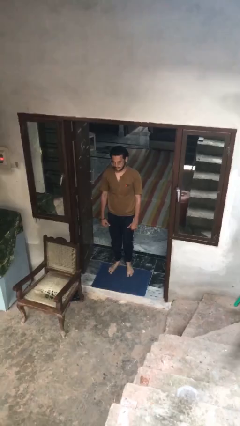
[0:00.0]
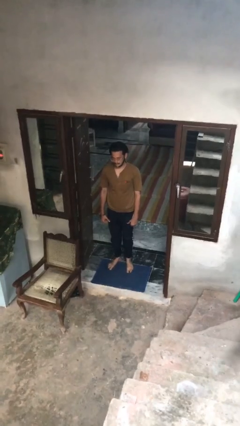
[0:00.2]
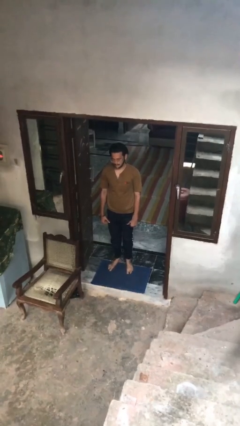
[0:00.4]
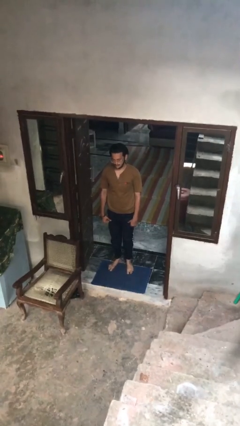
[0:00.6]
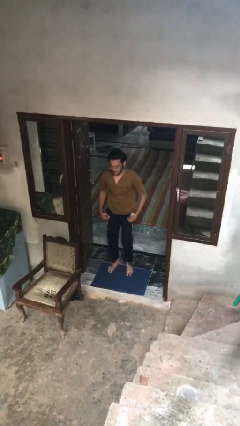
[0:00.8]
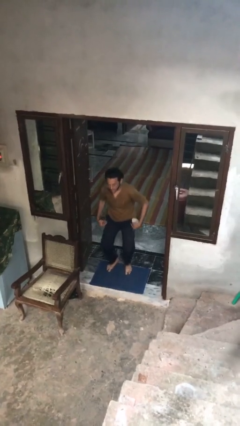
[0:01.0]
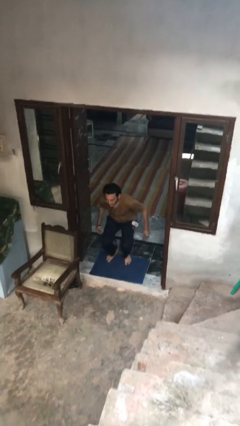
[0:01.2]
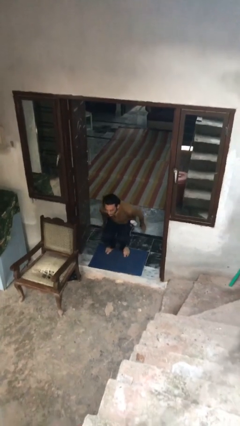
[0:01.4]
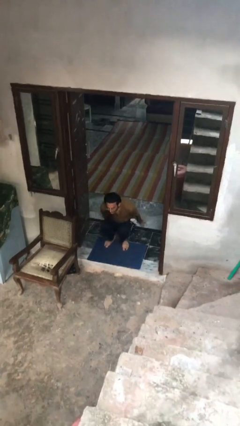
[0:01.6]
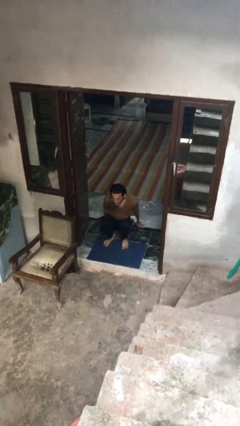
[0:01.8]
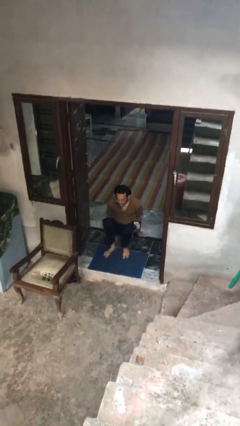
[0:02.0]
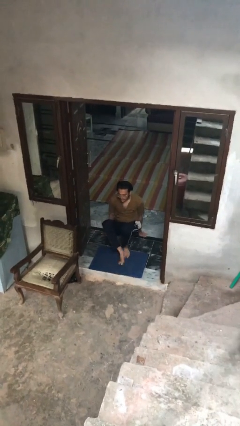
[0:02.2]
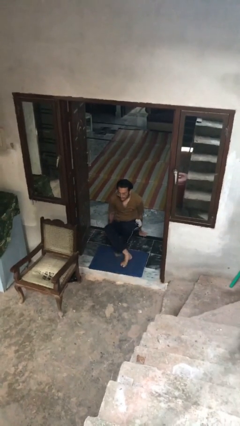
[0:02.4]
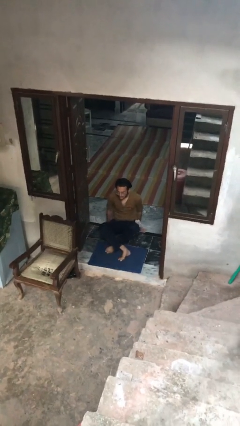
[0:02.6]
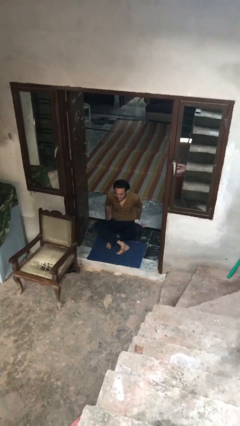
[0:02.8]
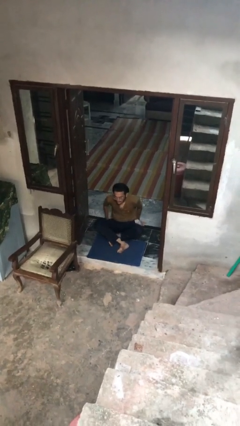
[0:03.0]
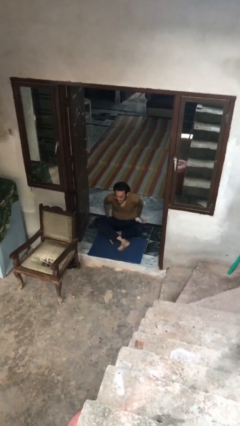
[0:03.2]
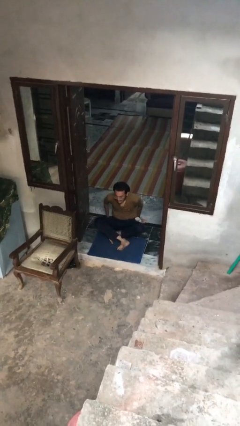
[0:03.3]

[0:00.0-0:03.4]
person sits crisscross

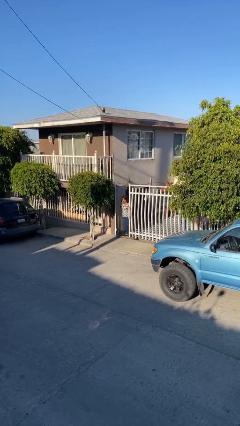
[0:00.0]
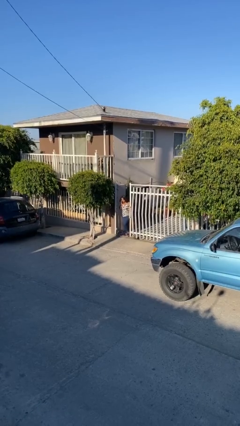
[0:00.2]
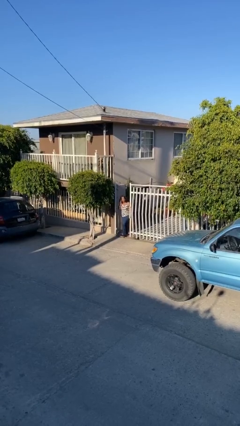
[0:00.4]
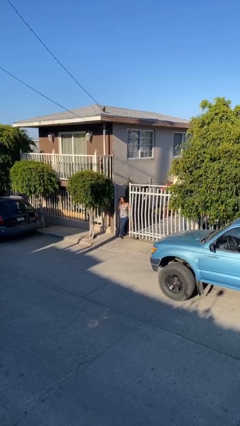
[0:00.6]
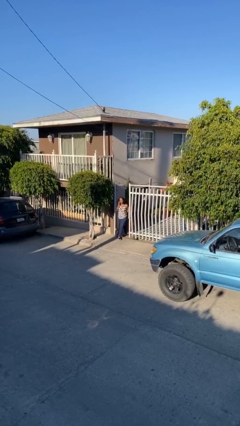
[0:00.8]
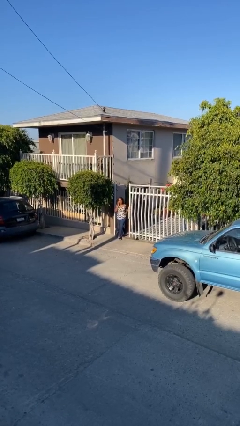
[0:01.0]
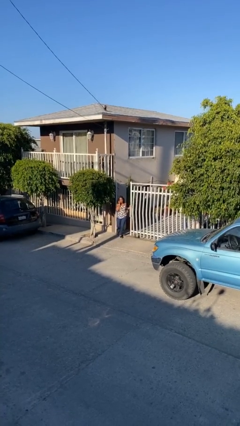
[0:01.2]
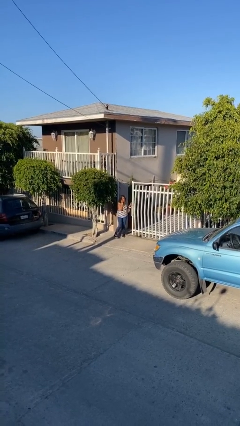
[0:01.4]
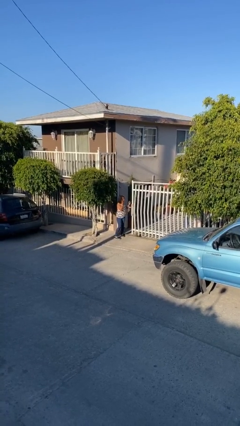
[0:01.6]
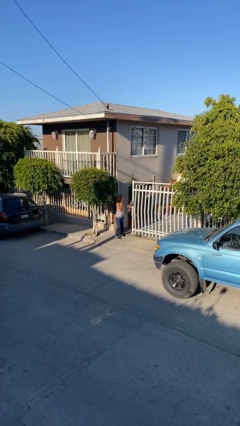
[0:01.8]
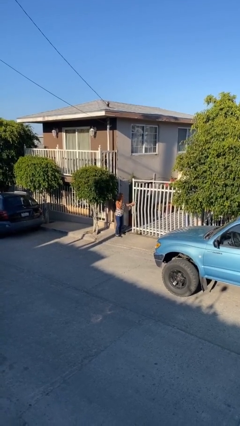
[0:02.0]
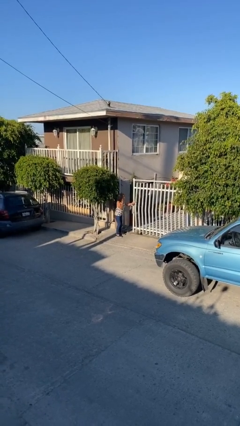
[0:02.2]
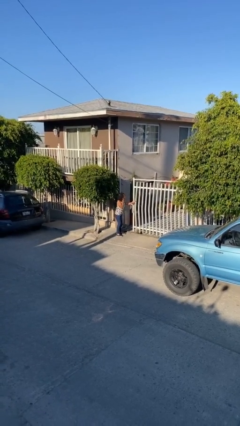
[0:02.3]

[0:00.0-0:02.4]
person enters scene through structure

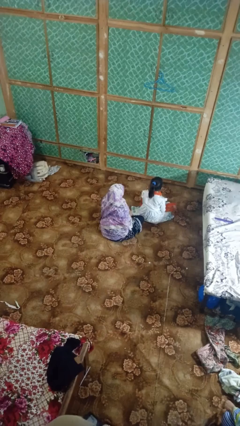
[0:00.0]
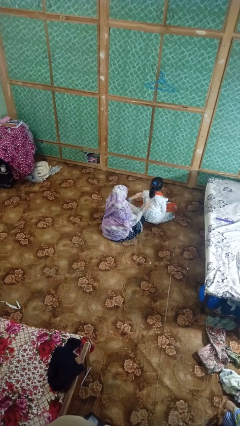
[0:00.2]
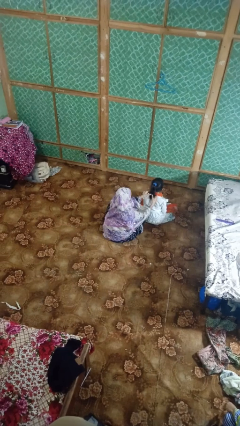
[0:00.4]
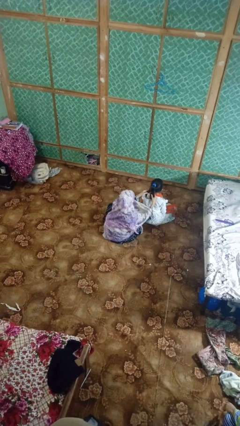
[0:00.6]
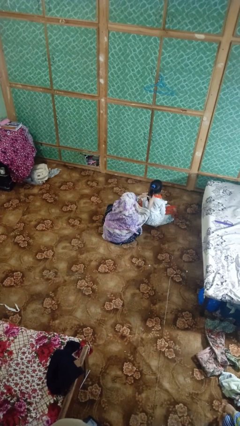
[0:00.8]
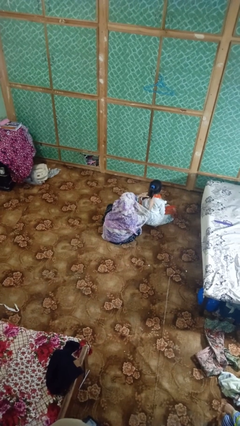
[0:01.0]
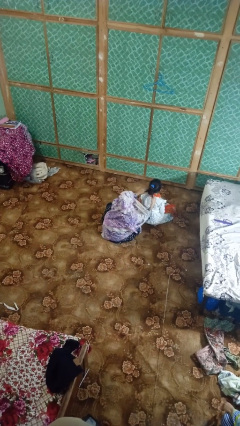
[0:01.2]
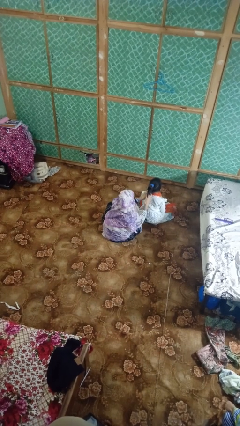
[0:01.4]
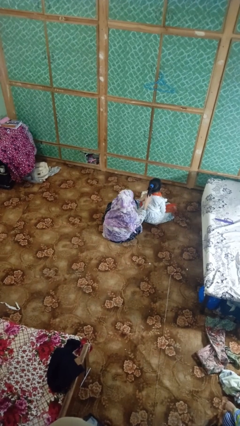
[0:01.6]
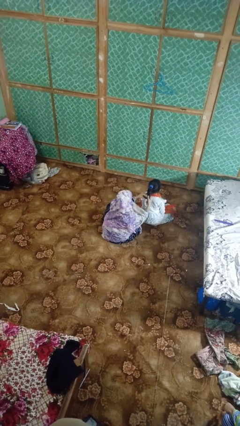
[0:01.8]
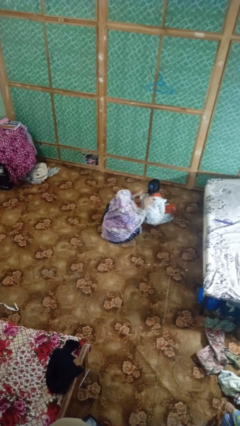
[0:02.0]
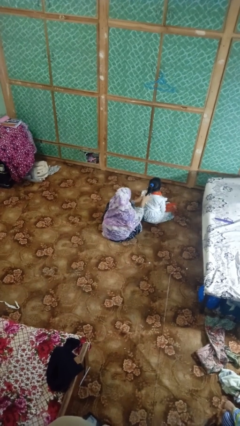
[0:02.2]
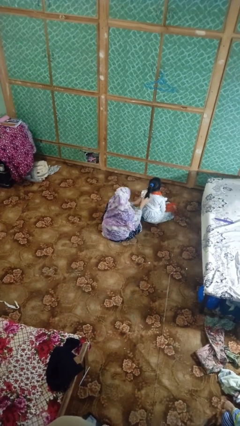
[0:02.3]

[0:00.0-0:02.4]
person braids hair of person

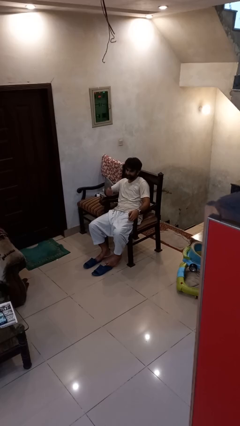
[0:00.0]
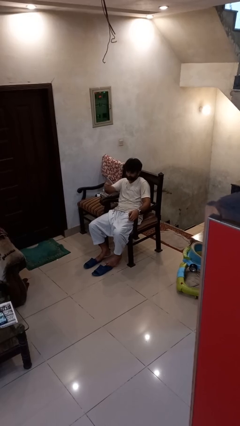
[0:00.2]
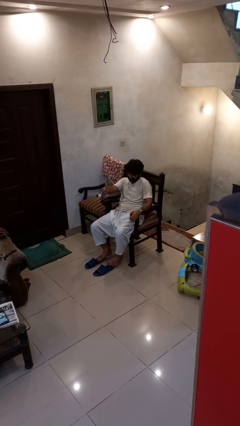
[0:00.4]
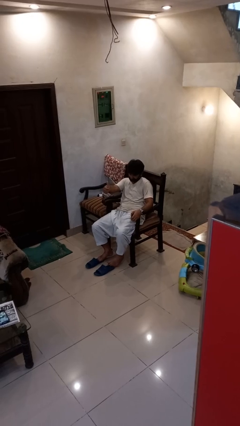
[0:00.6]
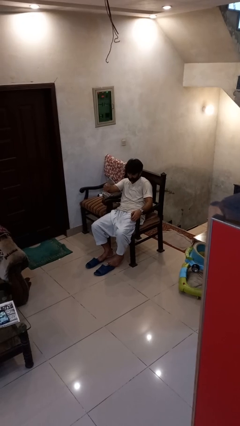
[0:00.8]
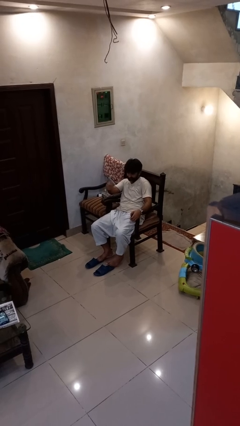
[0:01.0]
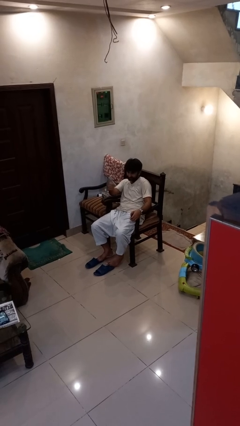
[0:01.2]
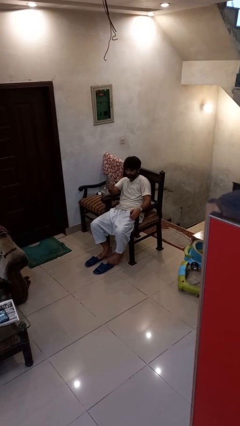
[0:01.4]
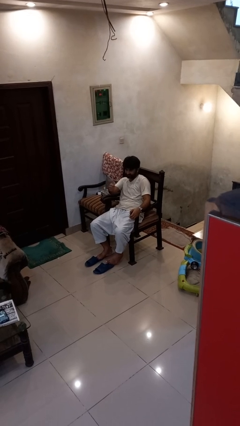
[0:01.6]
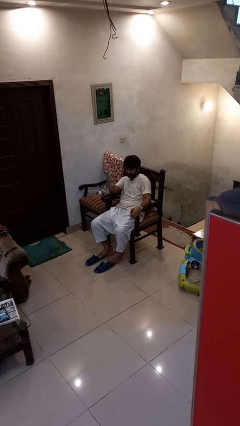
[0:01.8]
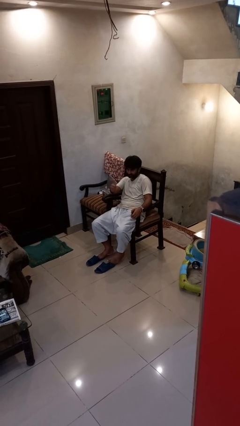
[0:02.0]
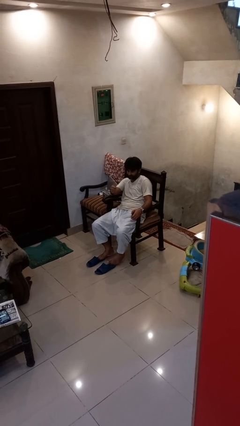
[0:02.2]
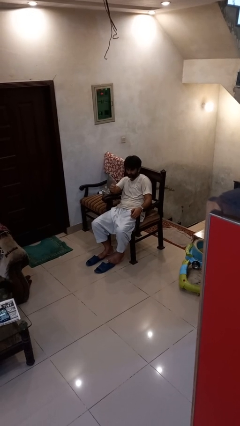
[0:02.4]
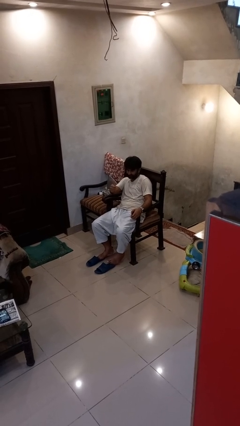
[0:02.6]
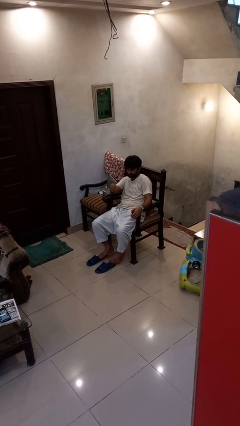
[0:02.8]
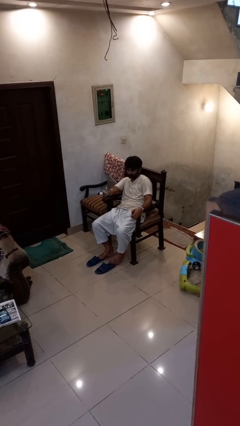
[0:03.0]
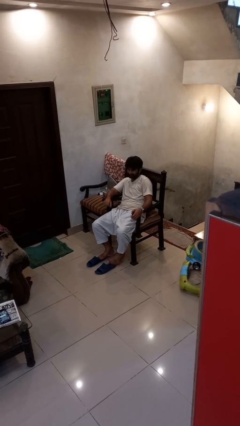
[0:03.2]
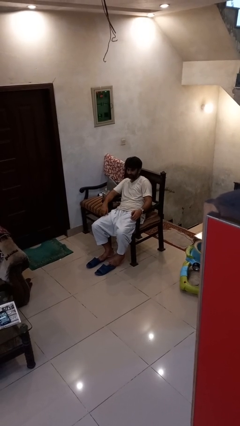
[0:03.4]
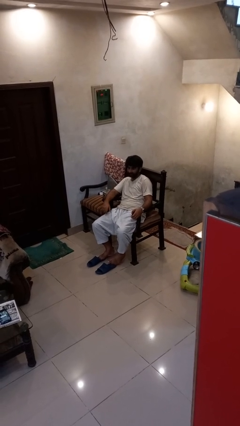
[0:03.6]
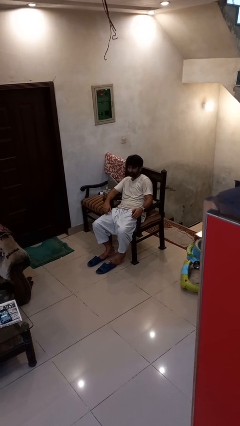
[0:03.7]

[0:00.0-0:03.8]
person gestures thumbs up

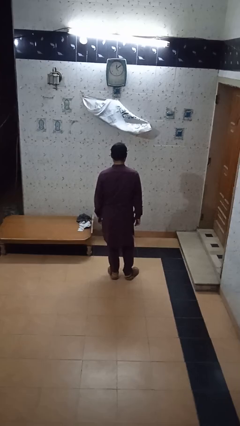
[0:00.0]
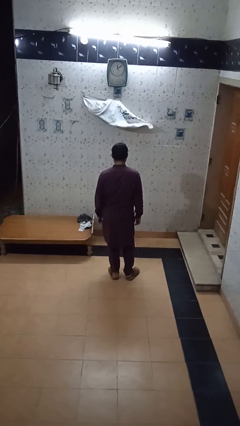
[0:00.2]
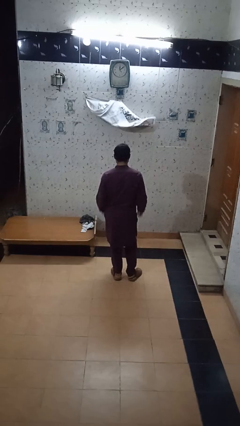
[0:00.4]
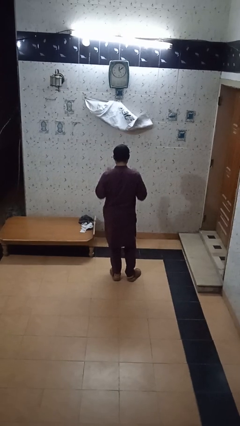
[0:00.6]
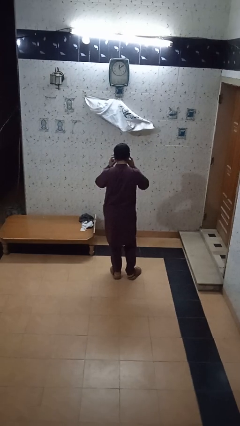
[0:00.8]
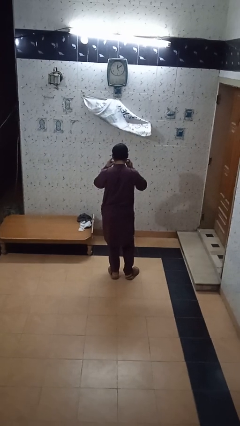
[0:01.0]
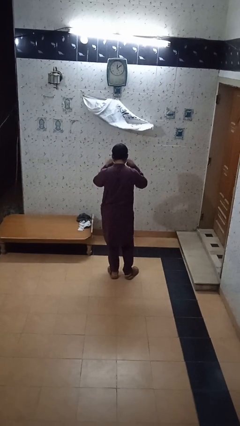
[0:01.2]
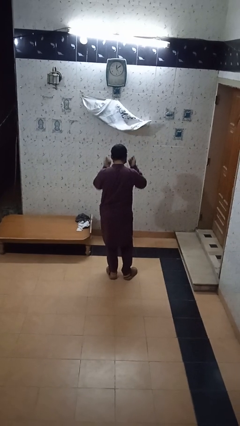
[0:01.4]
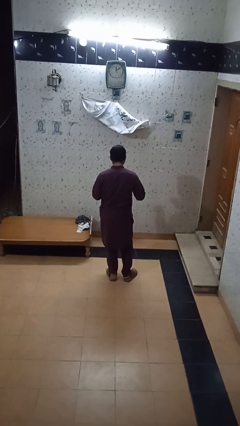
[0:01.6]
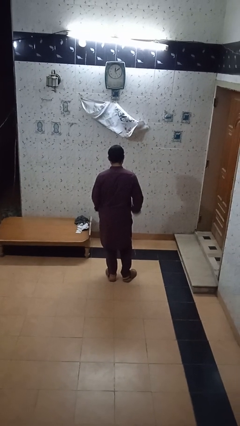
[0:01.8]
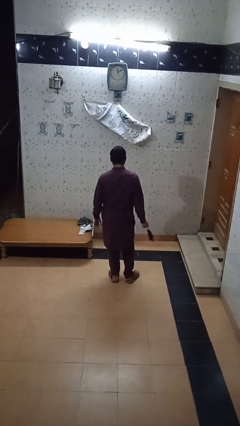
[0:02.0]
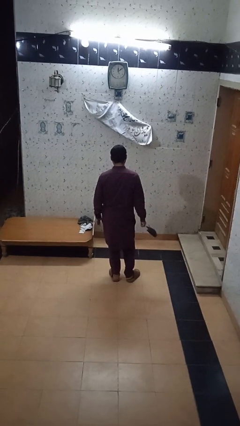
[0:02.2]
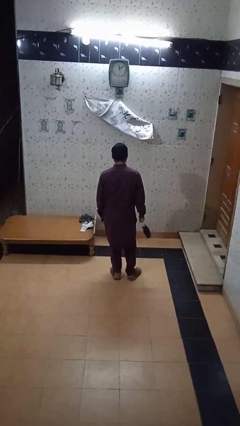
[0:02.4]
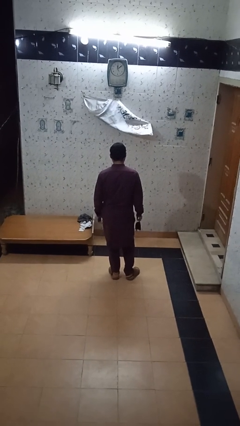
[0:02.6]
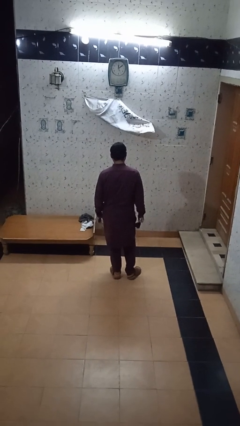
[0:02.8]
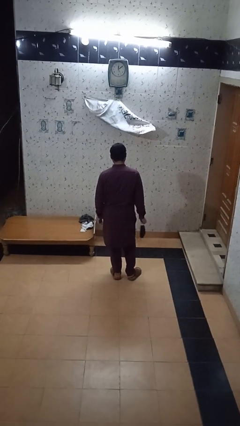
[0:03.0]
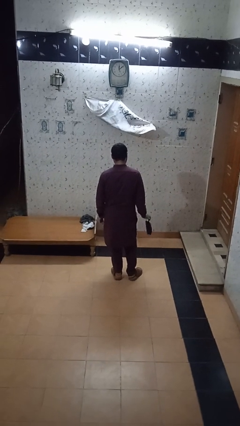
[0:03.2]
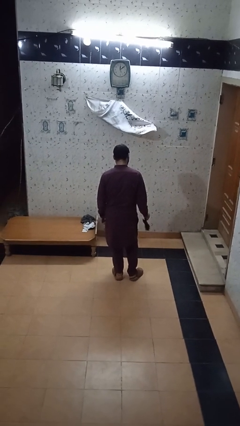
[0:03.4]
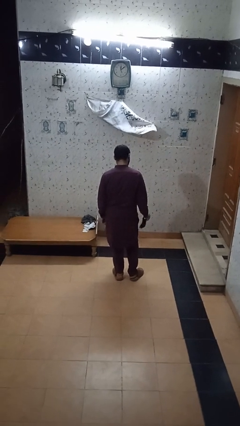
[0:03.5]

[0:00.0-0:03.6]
person takes off facemask

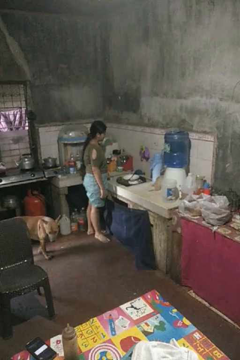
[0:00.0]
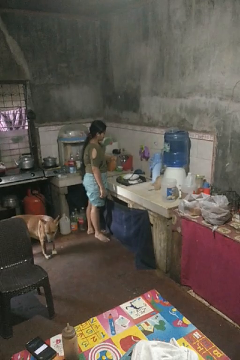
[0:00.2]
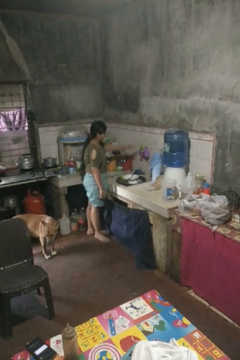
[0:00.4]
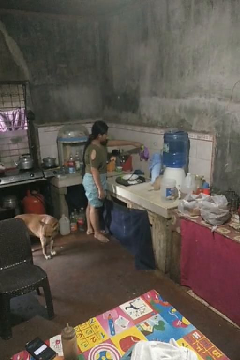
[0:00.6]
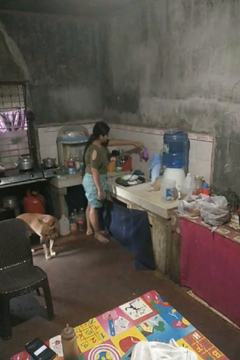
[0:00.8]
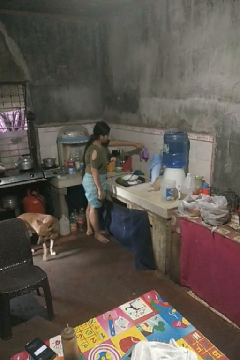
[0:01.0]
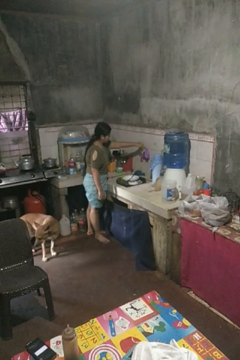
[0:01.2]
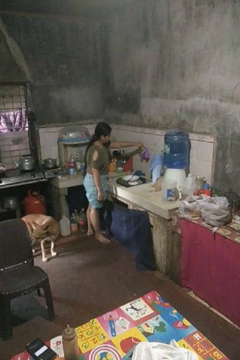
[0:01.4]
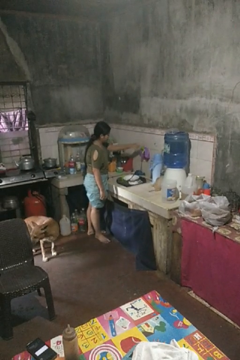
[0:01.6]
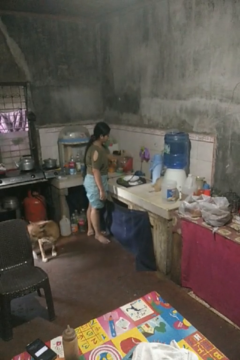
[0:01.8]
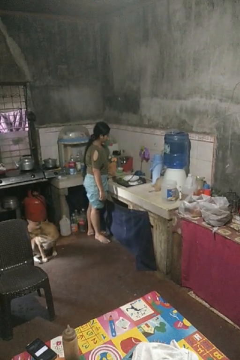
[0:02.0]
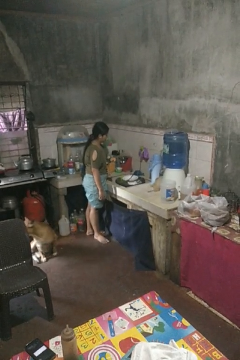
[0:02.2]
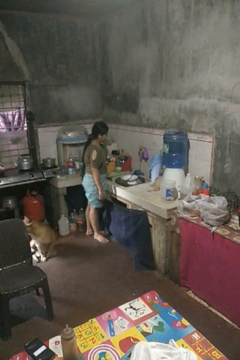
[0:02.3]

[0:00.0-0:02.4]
person turns on faucet
